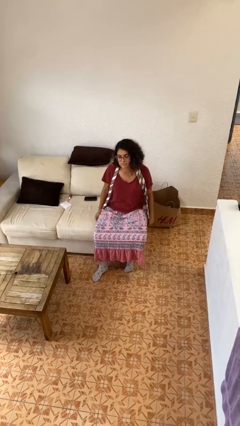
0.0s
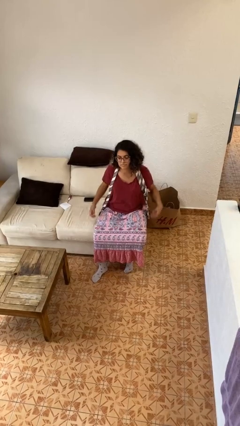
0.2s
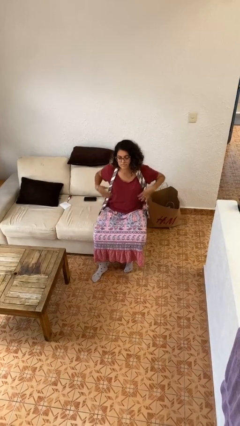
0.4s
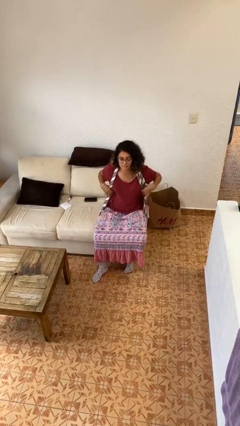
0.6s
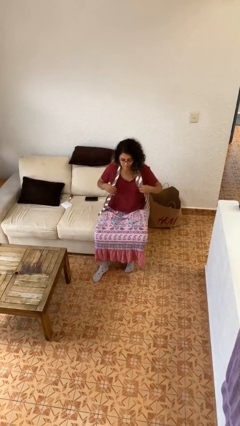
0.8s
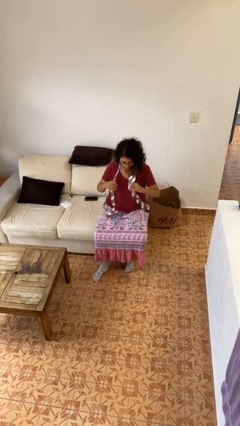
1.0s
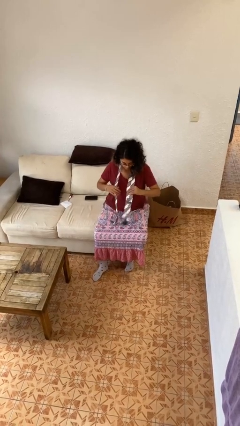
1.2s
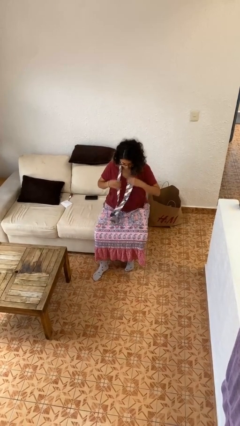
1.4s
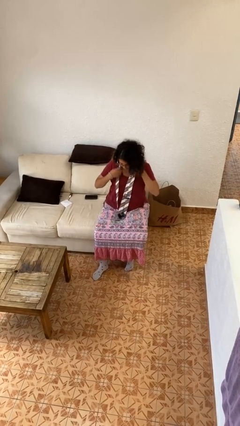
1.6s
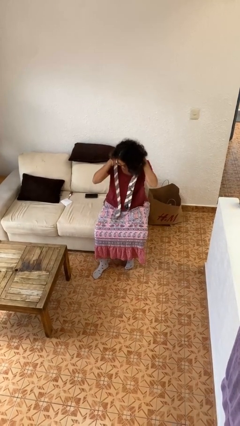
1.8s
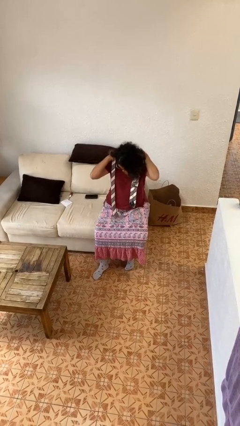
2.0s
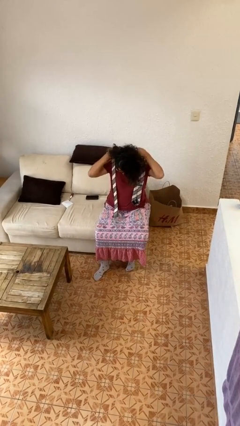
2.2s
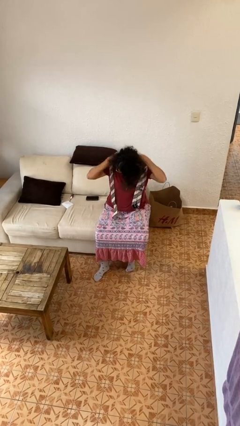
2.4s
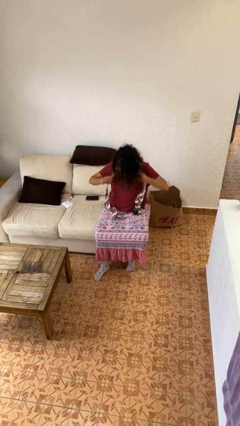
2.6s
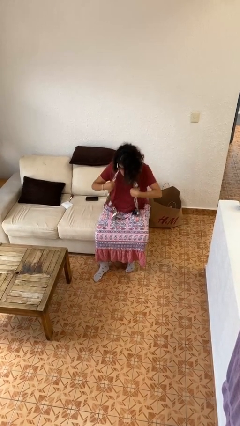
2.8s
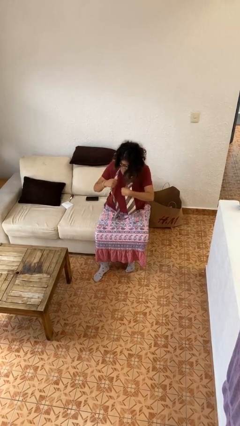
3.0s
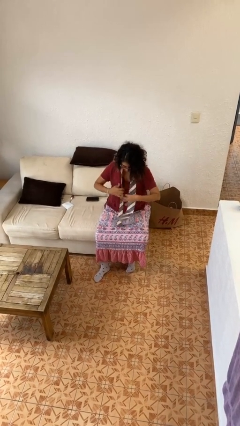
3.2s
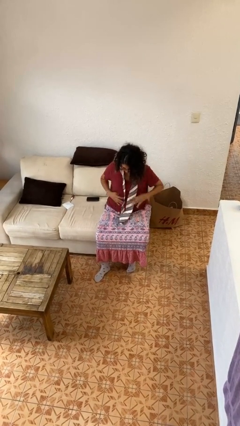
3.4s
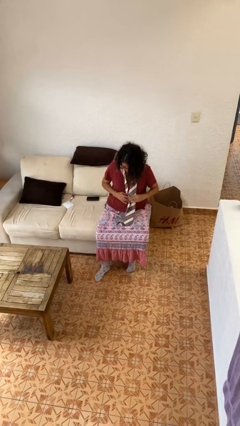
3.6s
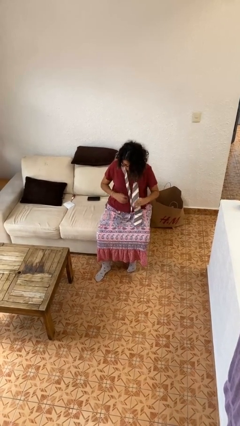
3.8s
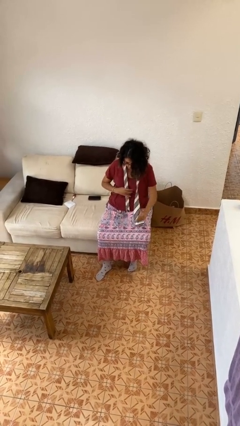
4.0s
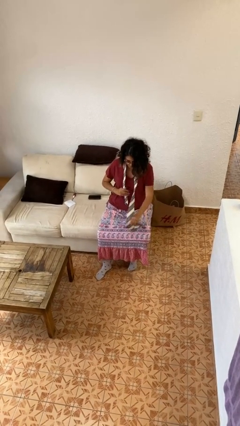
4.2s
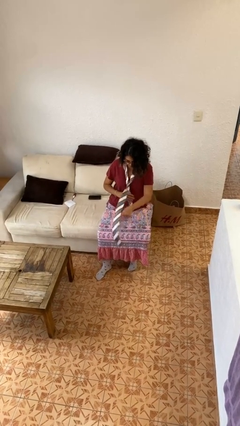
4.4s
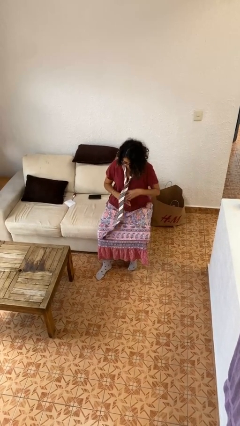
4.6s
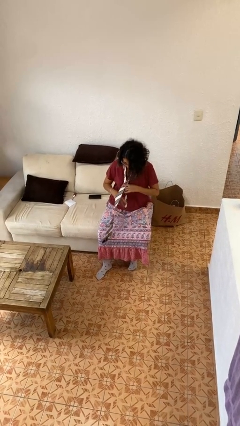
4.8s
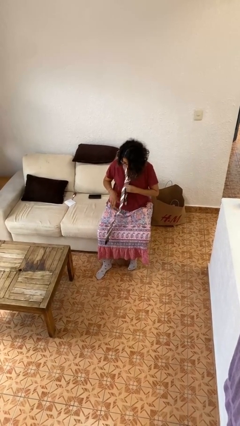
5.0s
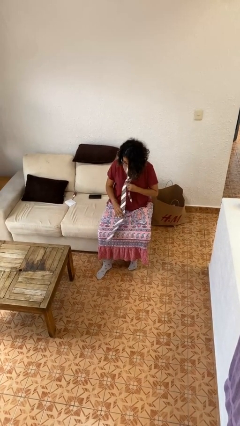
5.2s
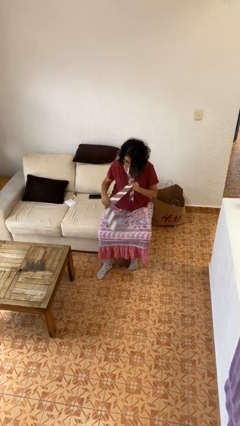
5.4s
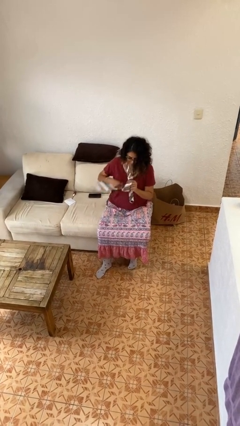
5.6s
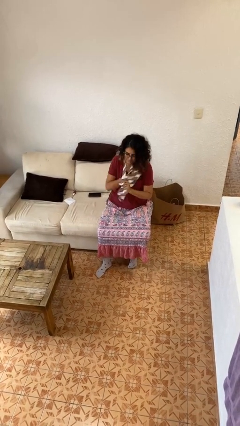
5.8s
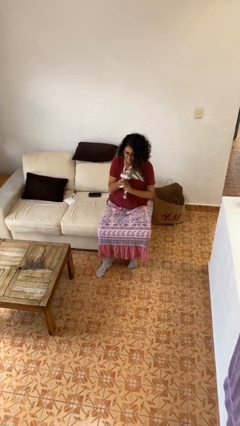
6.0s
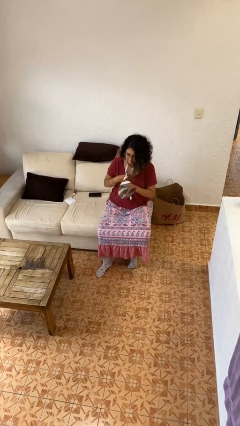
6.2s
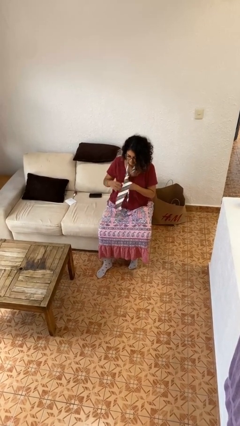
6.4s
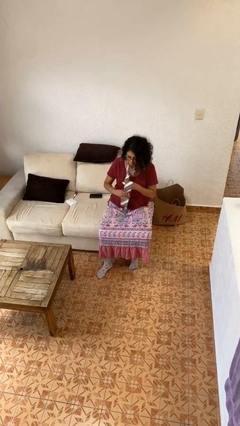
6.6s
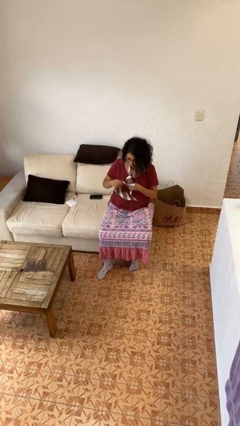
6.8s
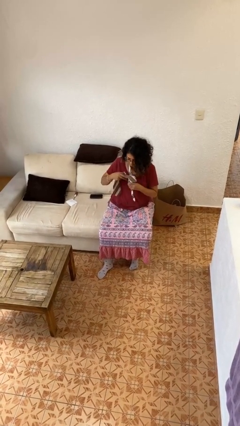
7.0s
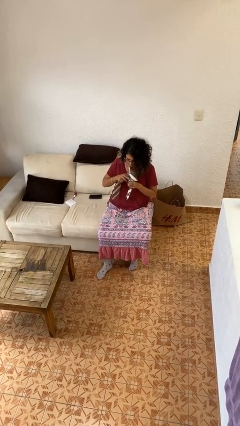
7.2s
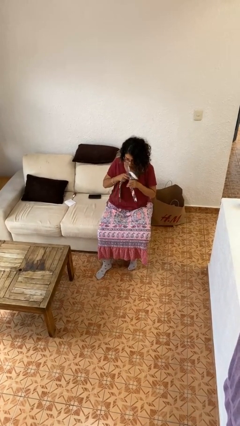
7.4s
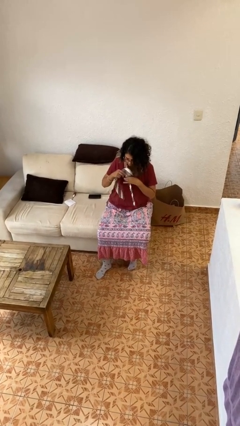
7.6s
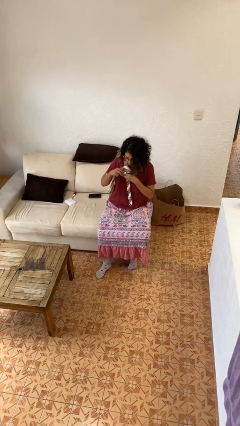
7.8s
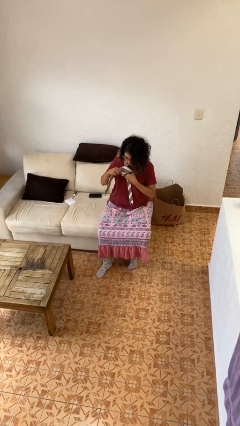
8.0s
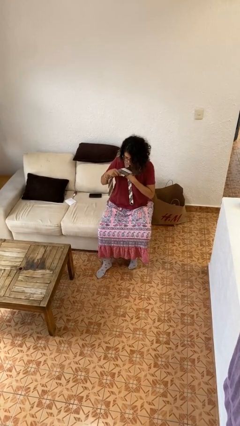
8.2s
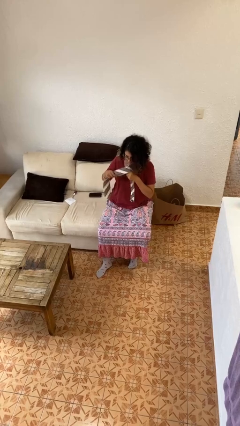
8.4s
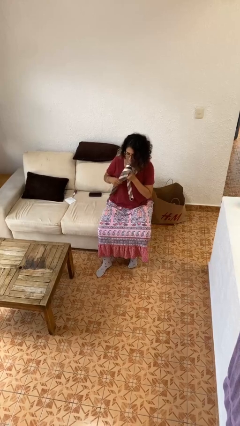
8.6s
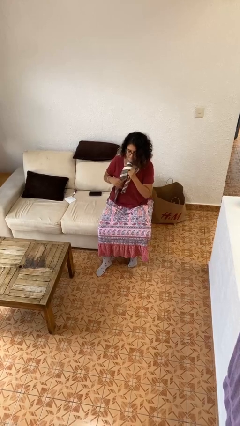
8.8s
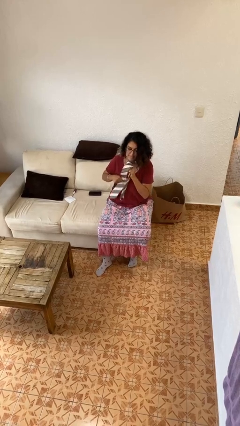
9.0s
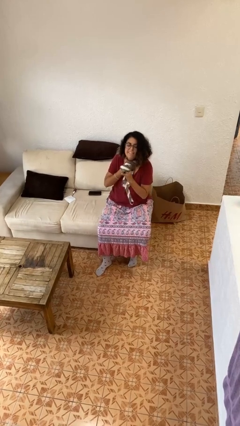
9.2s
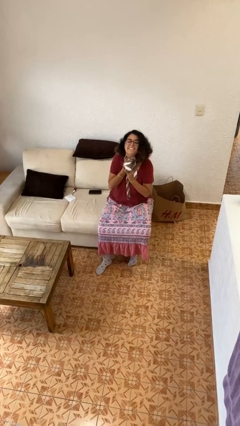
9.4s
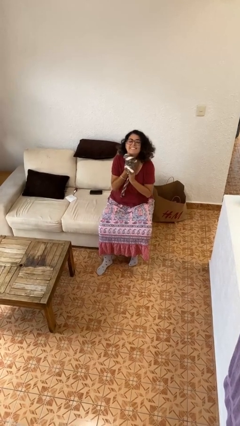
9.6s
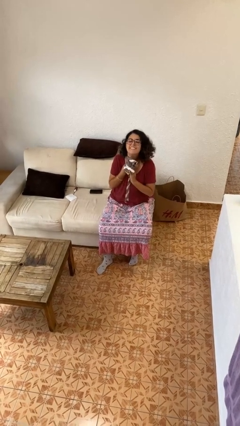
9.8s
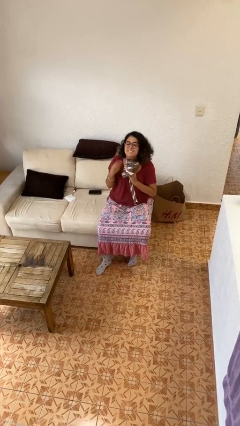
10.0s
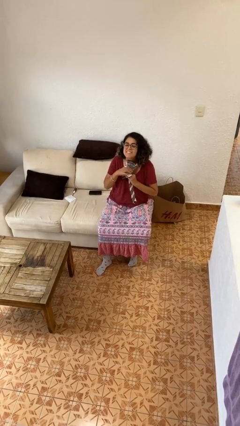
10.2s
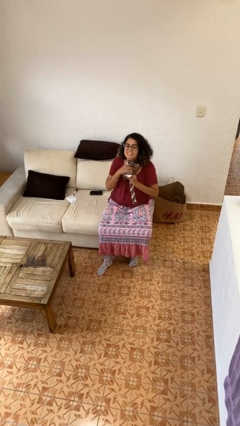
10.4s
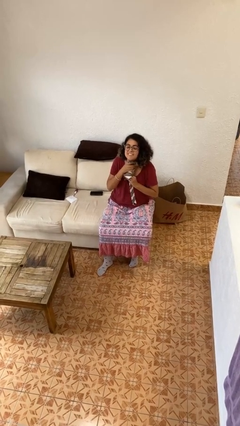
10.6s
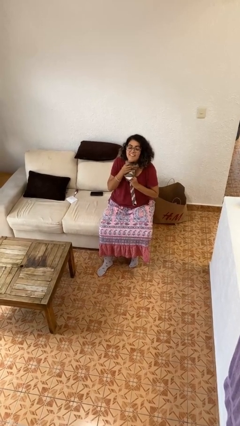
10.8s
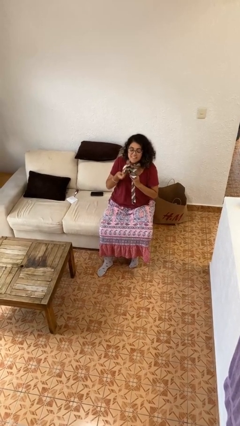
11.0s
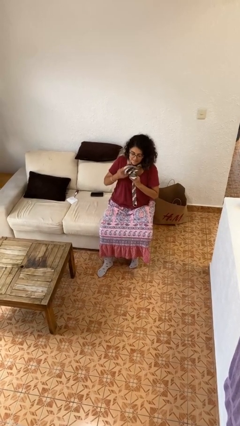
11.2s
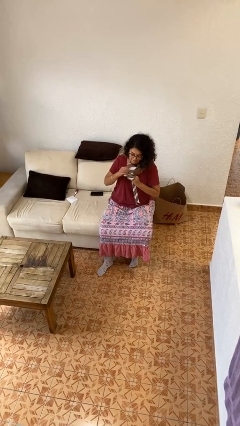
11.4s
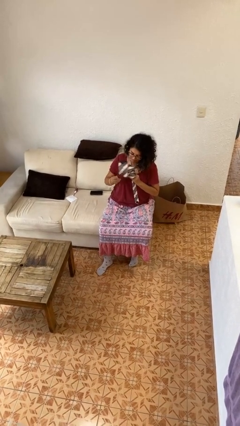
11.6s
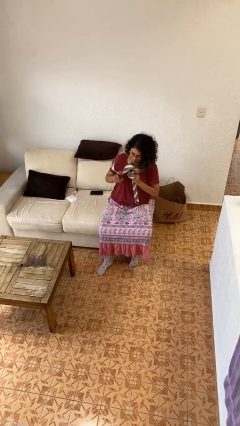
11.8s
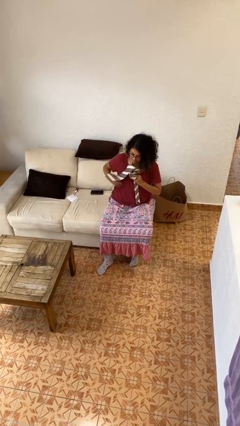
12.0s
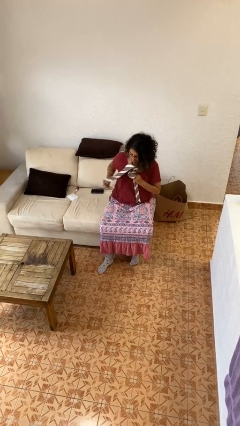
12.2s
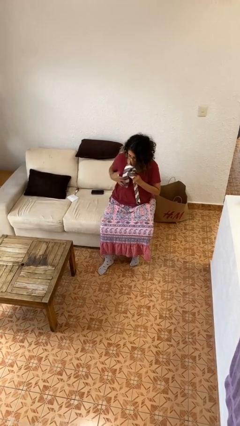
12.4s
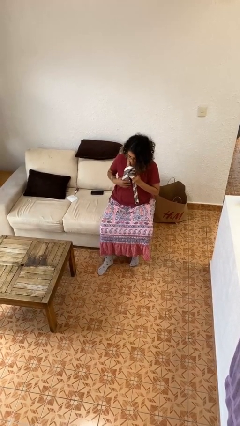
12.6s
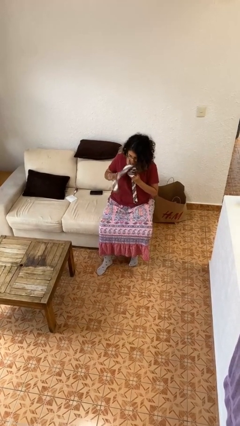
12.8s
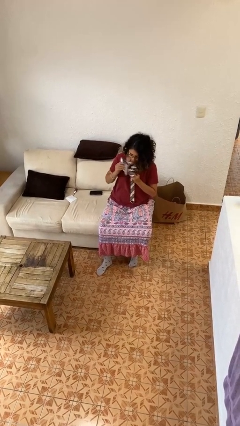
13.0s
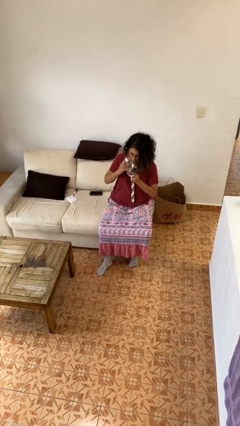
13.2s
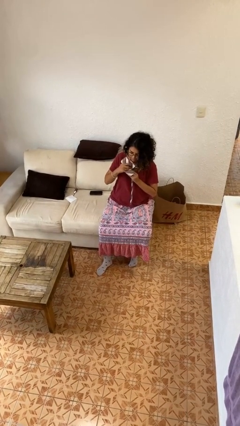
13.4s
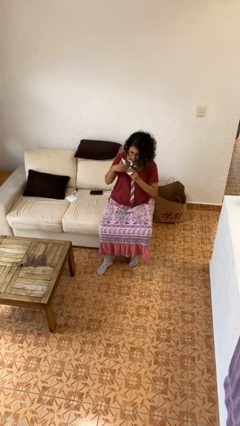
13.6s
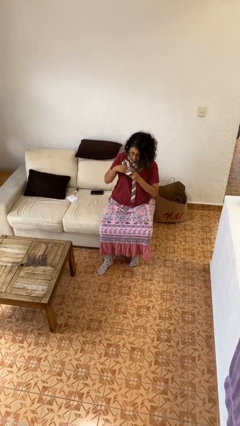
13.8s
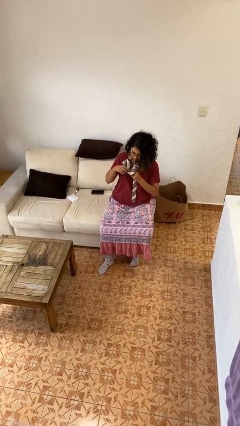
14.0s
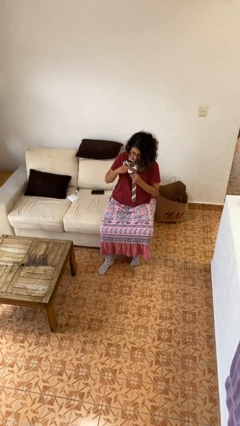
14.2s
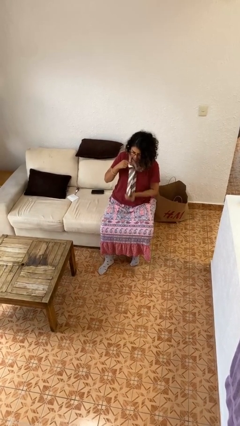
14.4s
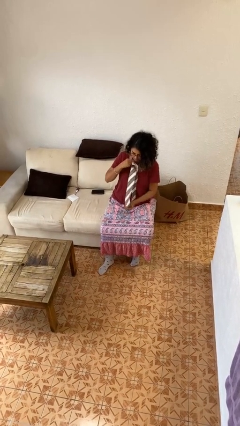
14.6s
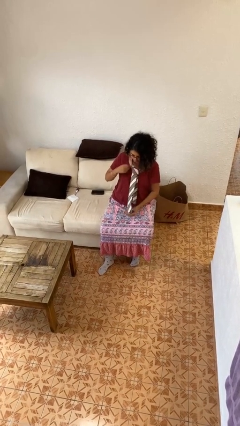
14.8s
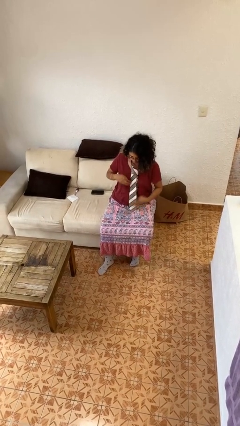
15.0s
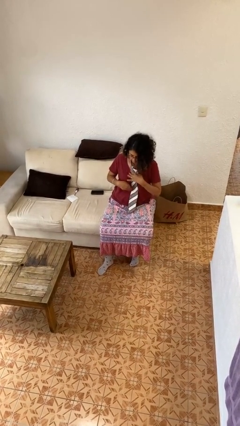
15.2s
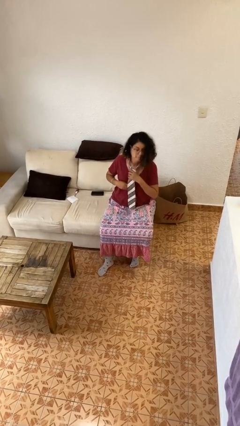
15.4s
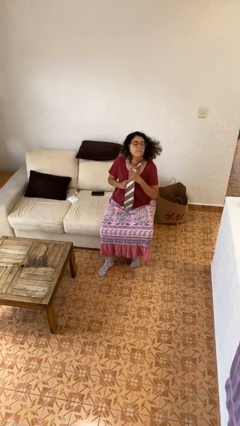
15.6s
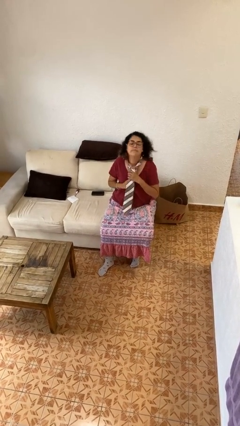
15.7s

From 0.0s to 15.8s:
person puts on necktie

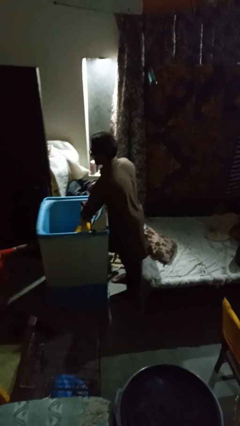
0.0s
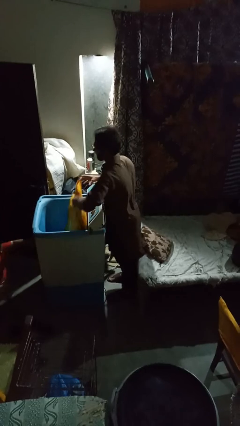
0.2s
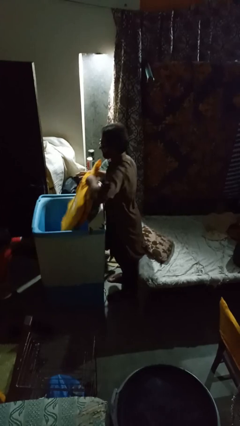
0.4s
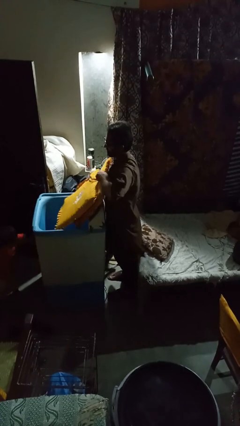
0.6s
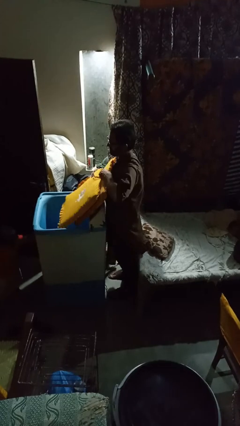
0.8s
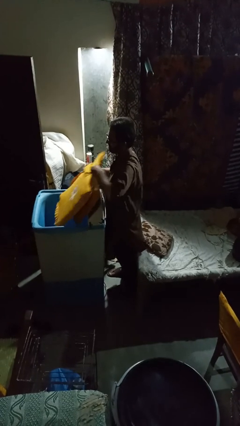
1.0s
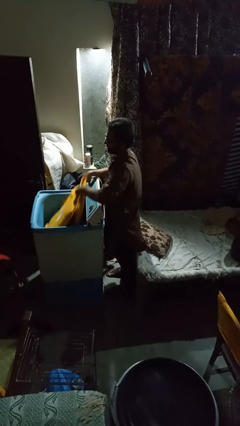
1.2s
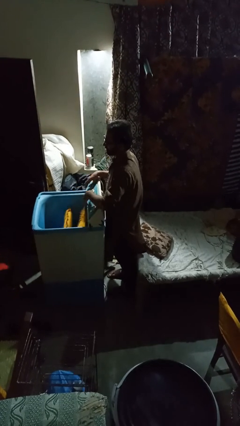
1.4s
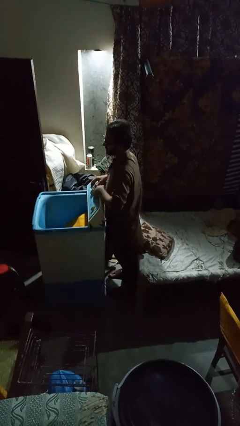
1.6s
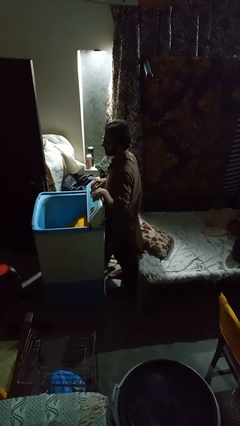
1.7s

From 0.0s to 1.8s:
person loads clotheswasher

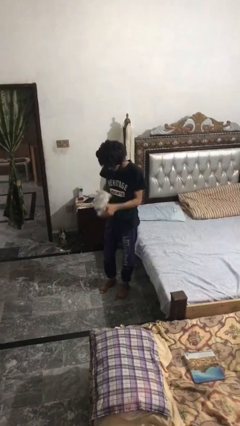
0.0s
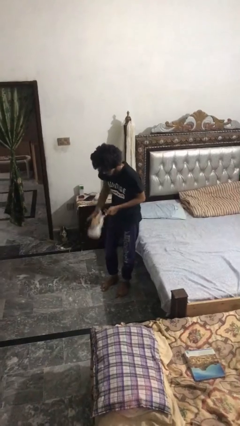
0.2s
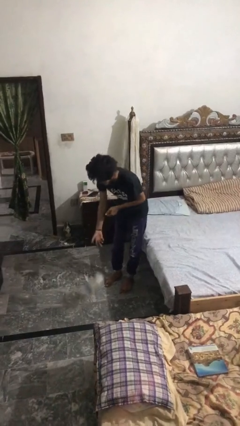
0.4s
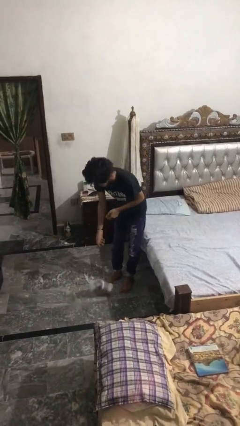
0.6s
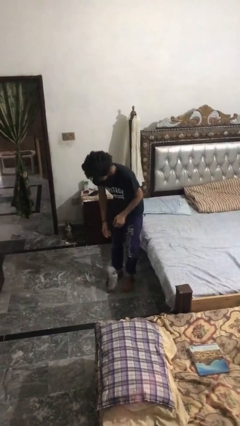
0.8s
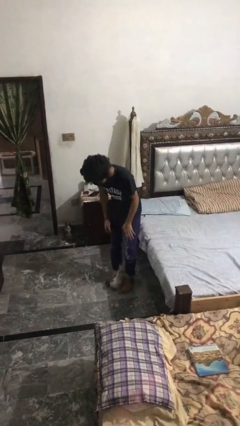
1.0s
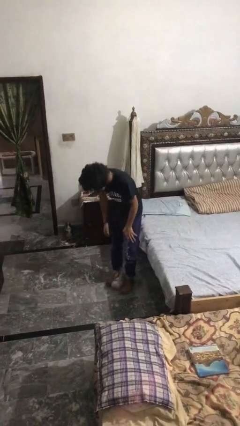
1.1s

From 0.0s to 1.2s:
person drops object
